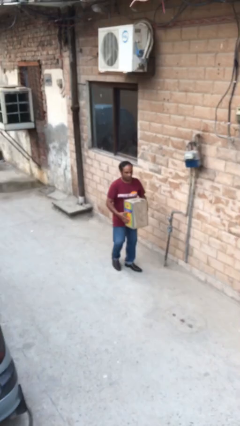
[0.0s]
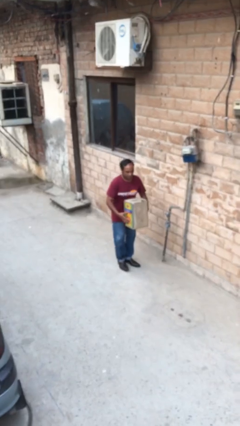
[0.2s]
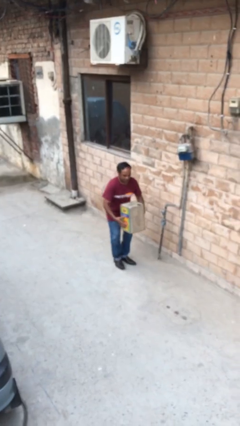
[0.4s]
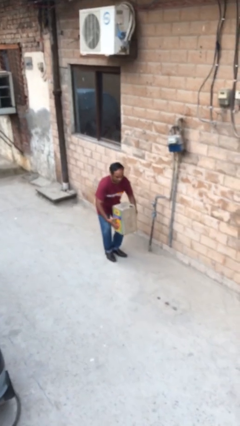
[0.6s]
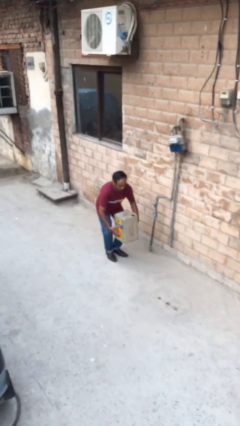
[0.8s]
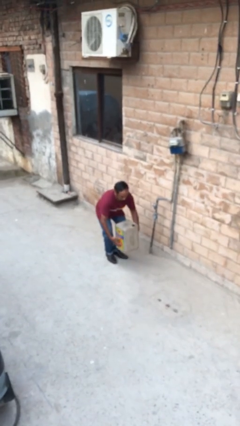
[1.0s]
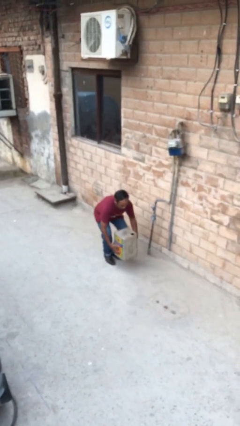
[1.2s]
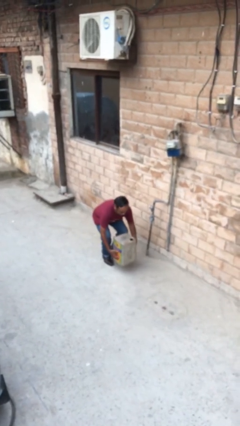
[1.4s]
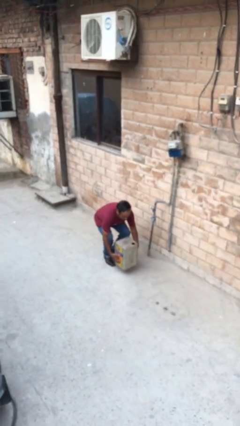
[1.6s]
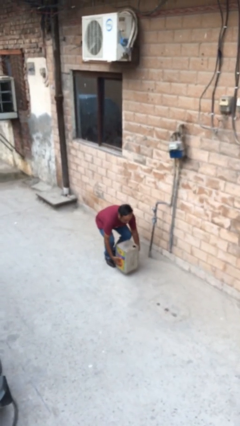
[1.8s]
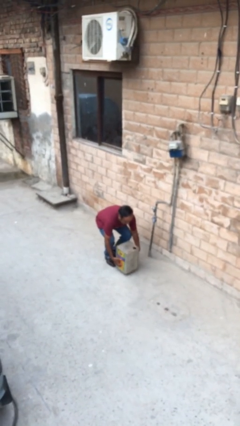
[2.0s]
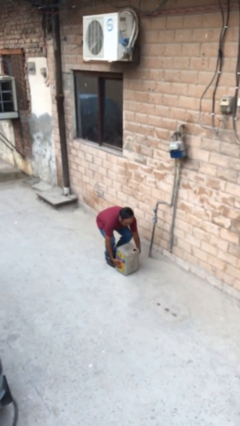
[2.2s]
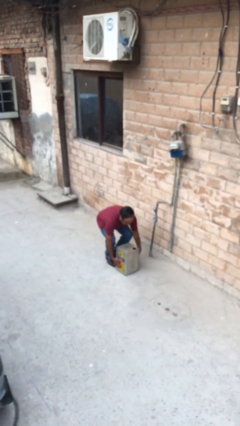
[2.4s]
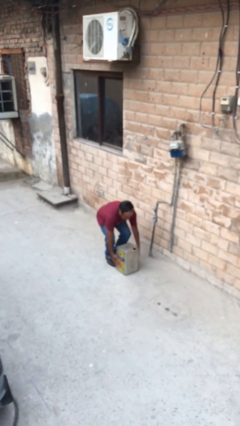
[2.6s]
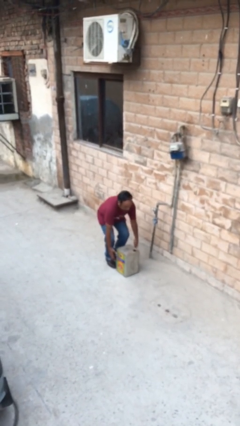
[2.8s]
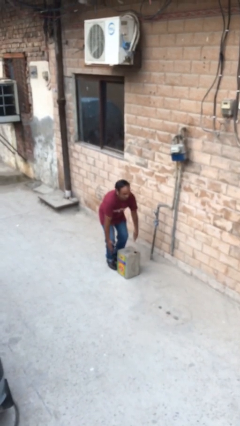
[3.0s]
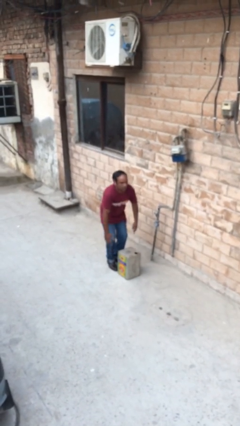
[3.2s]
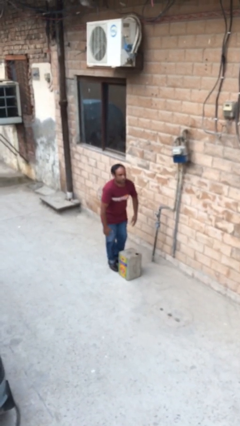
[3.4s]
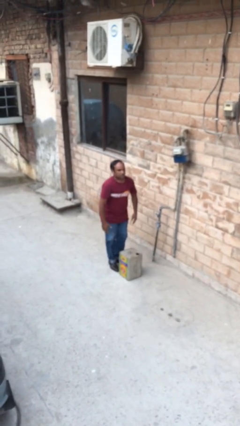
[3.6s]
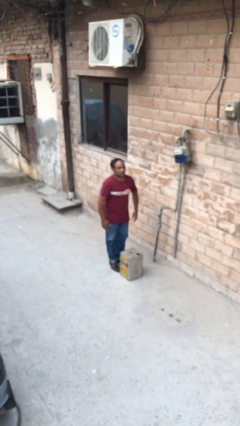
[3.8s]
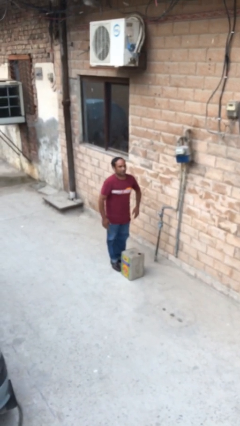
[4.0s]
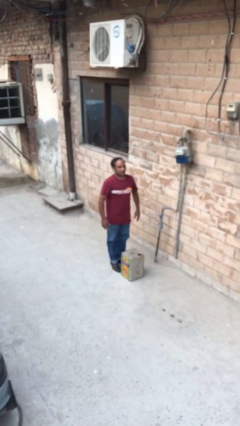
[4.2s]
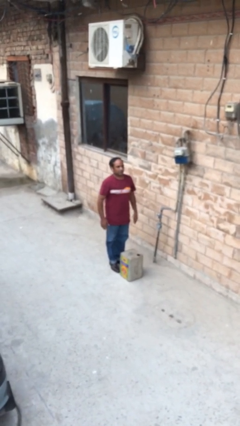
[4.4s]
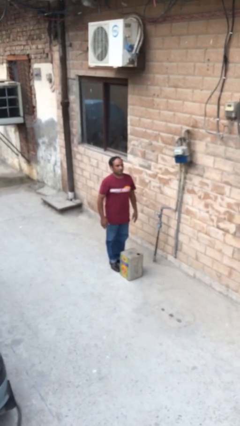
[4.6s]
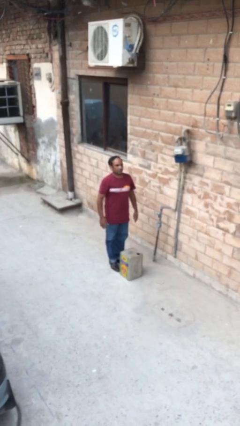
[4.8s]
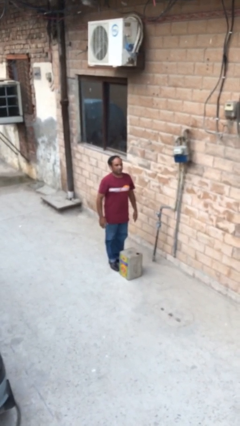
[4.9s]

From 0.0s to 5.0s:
person puts down object on floor

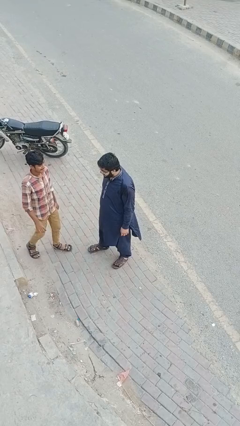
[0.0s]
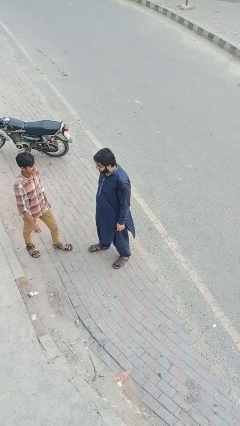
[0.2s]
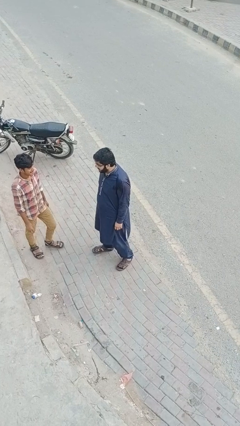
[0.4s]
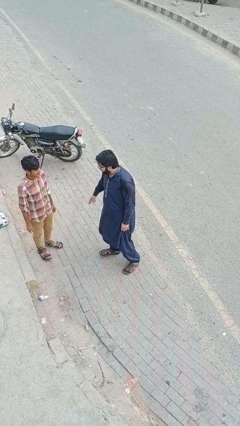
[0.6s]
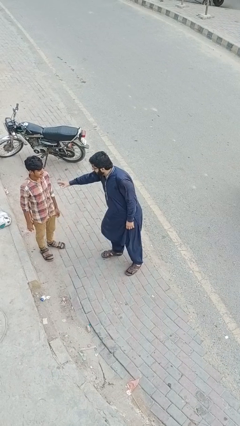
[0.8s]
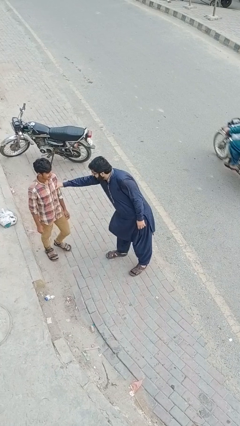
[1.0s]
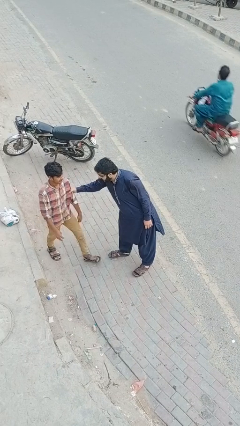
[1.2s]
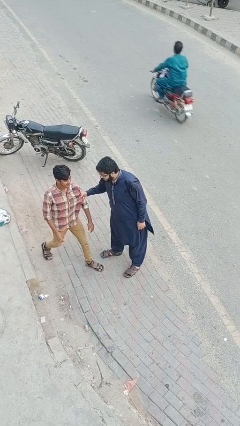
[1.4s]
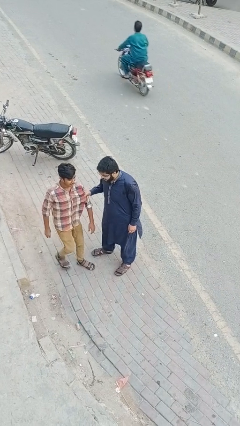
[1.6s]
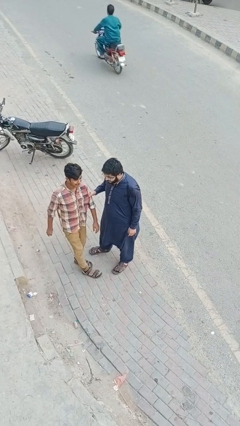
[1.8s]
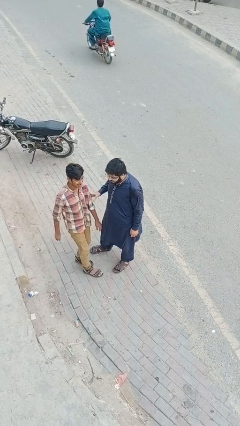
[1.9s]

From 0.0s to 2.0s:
person grabs person by bicep

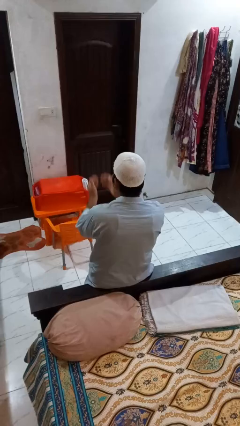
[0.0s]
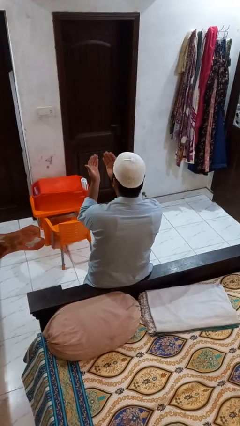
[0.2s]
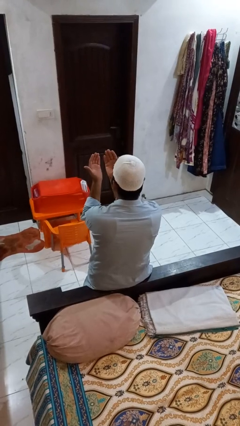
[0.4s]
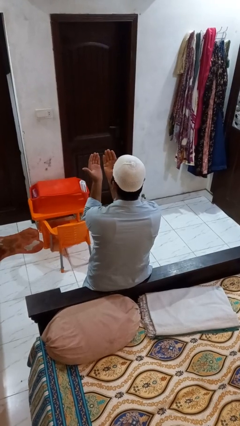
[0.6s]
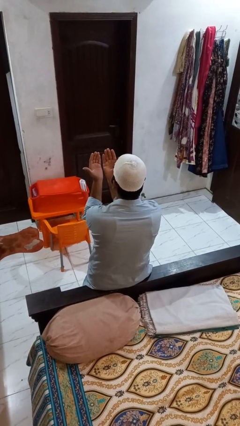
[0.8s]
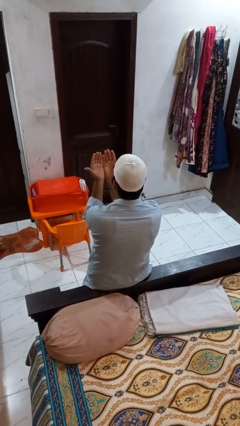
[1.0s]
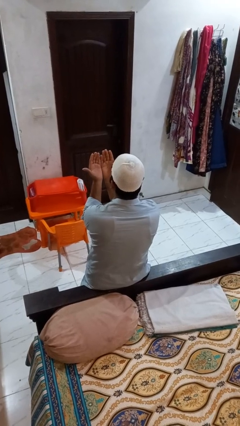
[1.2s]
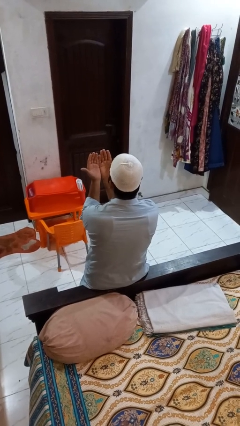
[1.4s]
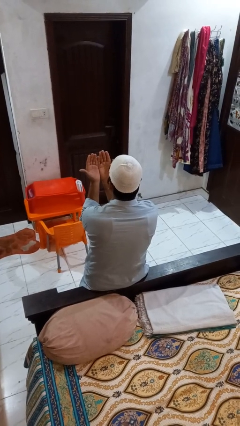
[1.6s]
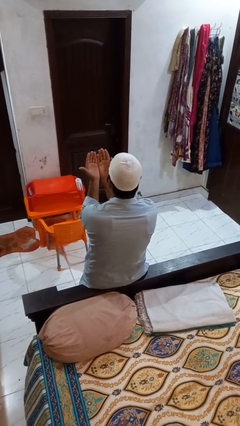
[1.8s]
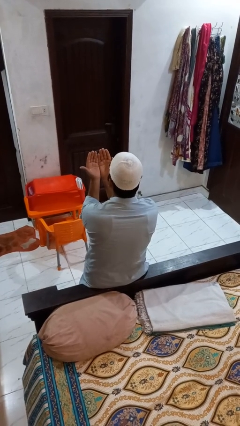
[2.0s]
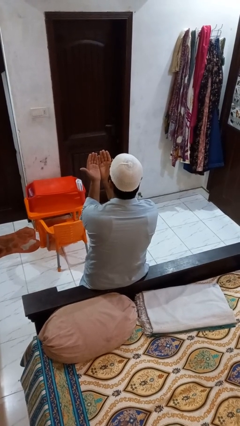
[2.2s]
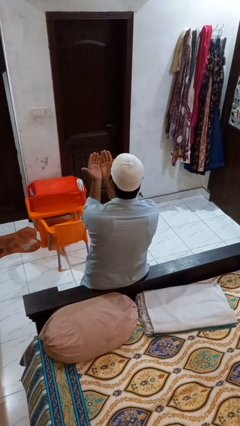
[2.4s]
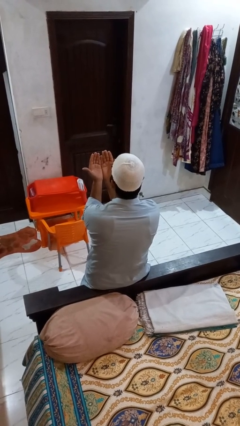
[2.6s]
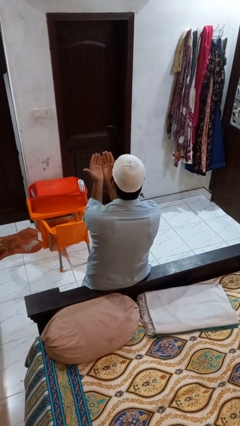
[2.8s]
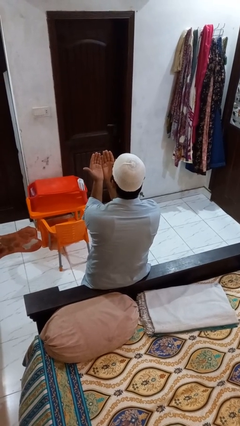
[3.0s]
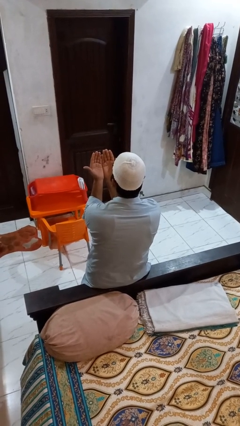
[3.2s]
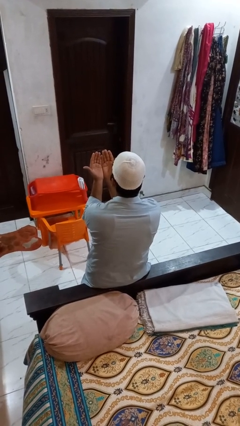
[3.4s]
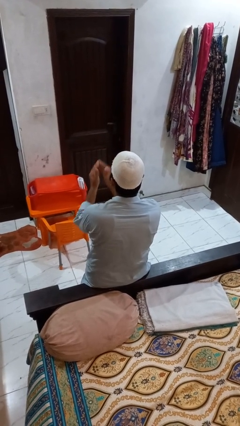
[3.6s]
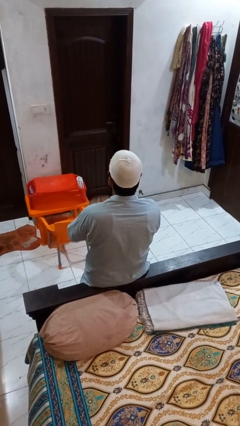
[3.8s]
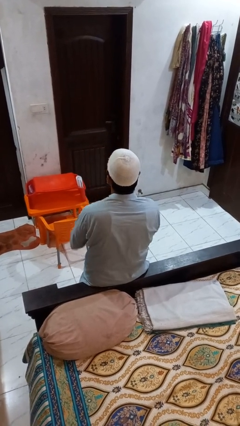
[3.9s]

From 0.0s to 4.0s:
person prays

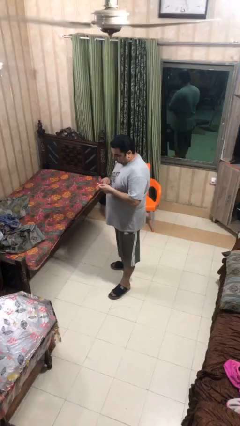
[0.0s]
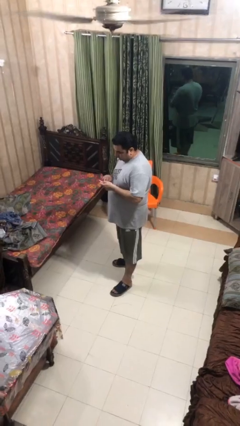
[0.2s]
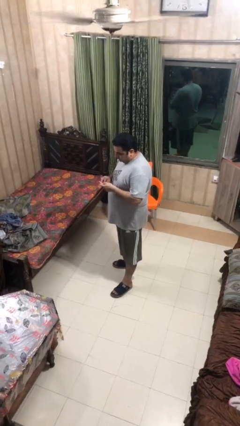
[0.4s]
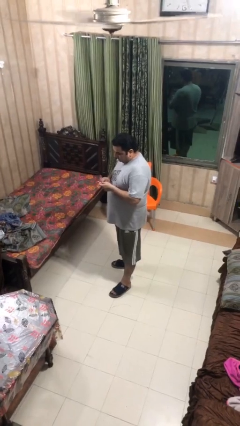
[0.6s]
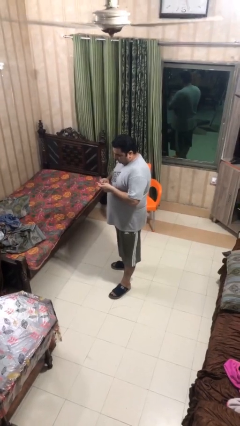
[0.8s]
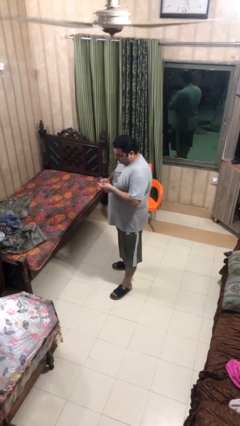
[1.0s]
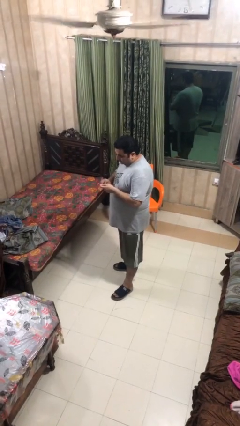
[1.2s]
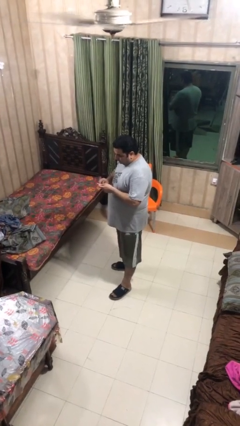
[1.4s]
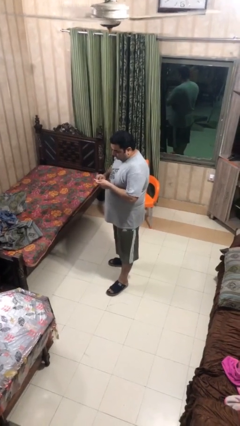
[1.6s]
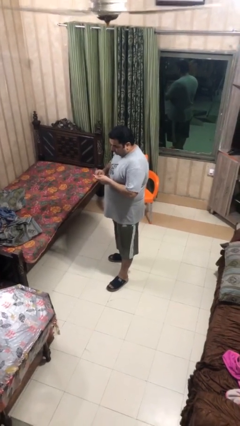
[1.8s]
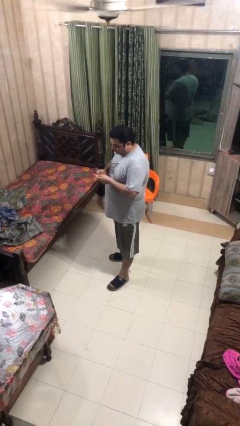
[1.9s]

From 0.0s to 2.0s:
person files fingernails

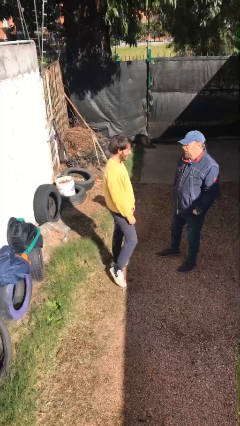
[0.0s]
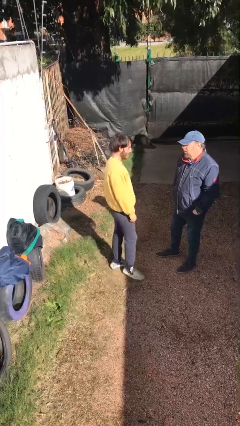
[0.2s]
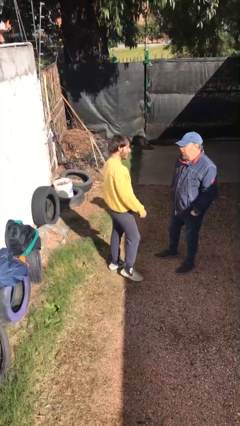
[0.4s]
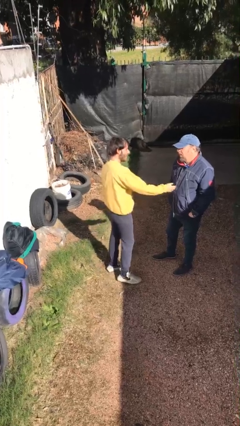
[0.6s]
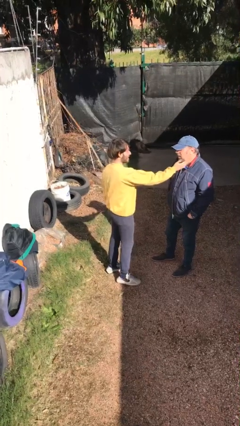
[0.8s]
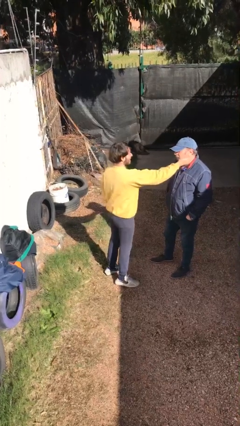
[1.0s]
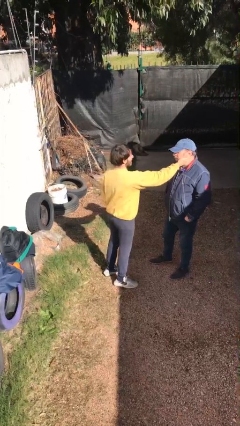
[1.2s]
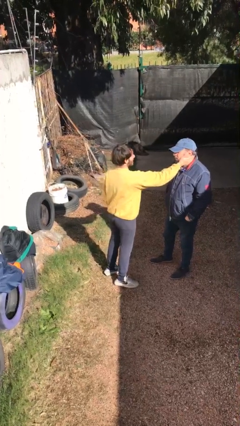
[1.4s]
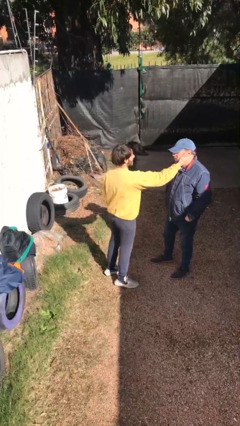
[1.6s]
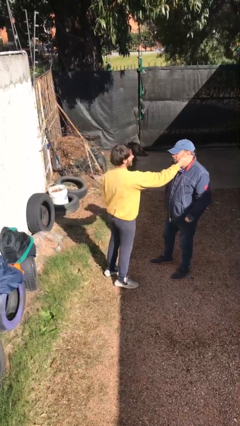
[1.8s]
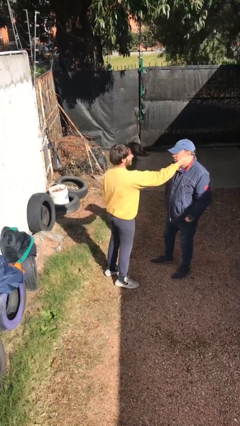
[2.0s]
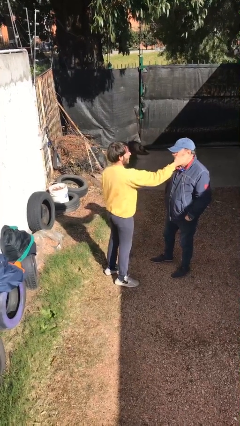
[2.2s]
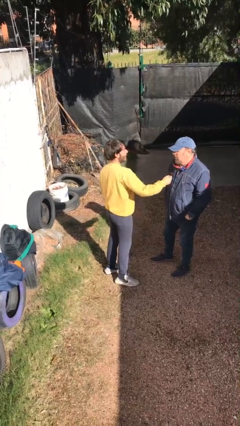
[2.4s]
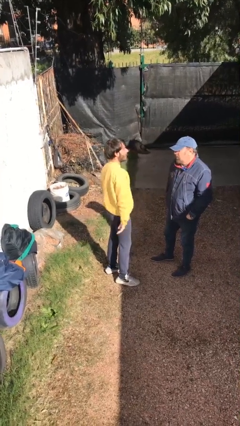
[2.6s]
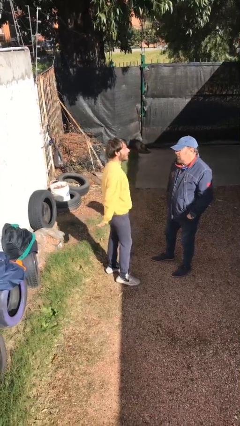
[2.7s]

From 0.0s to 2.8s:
person touches face of person

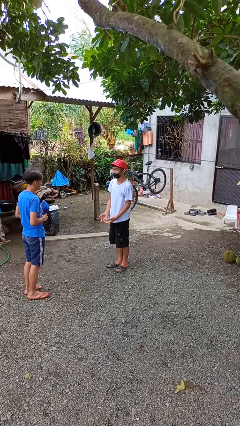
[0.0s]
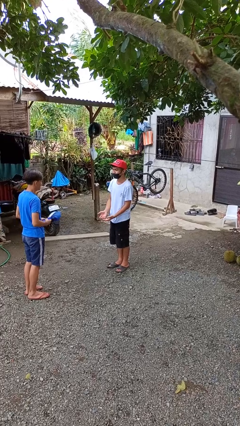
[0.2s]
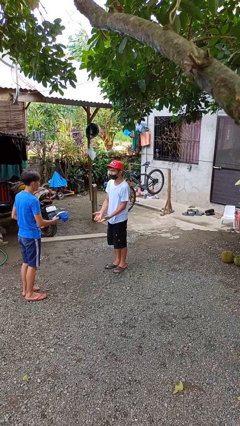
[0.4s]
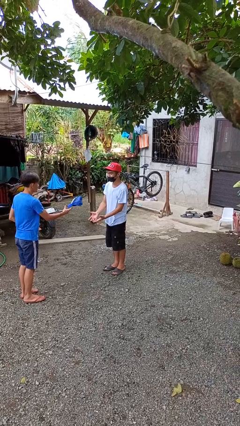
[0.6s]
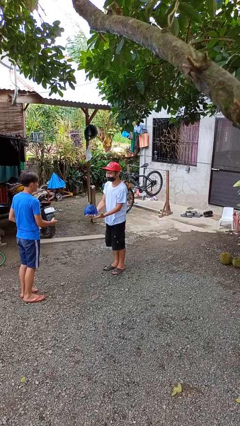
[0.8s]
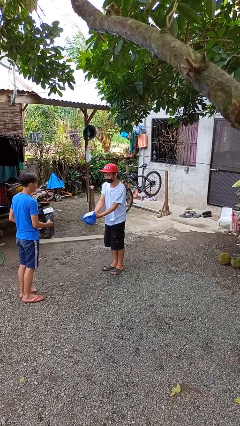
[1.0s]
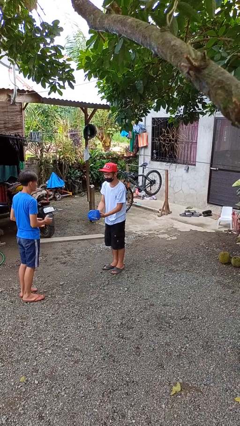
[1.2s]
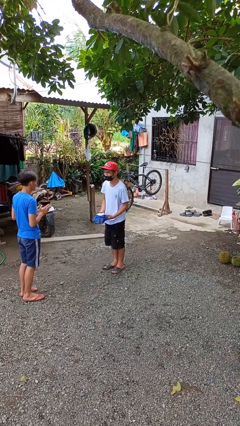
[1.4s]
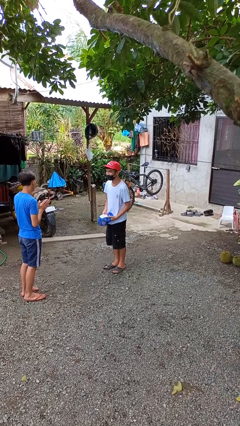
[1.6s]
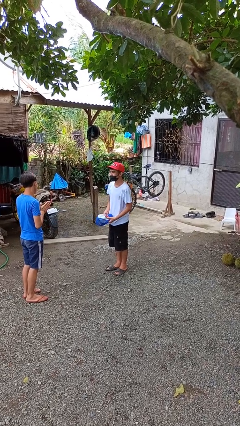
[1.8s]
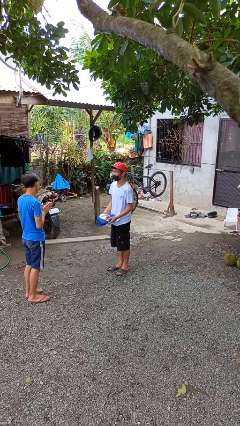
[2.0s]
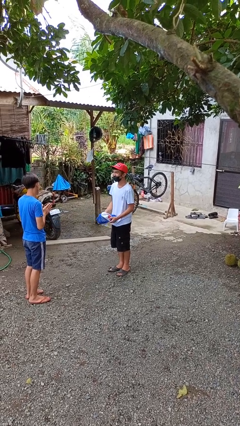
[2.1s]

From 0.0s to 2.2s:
person catches object from person
